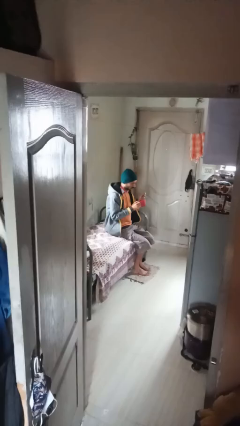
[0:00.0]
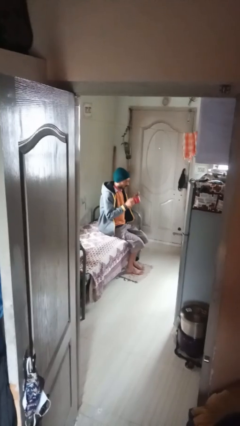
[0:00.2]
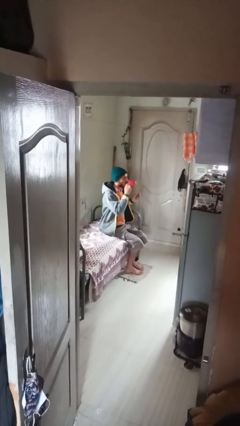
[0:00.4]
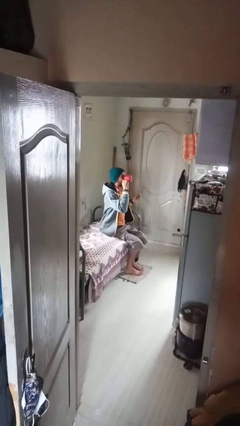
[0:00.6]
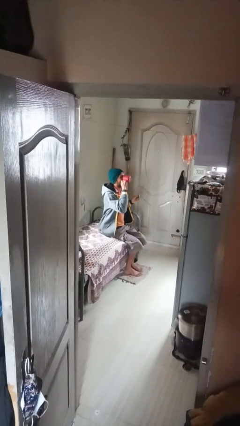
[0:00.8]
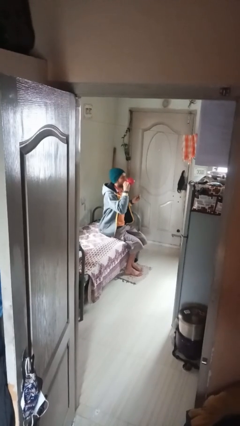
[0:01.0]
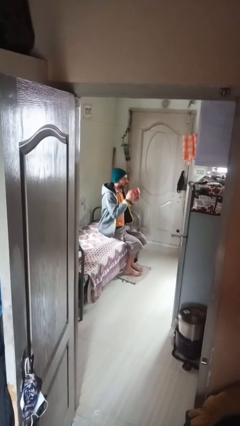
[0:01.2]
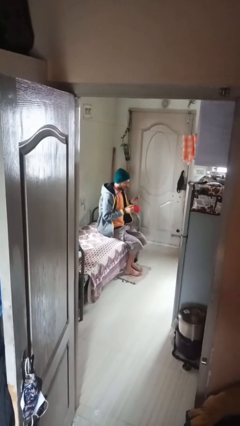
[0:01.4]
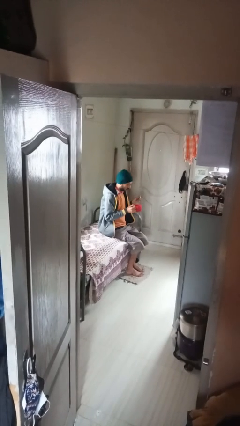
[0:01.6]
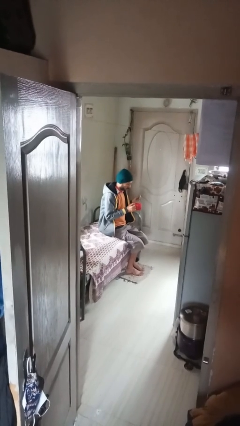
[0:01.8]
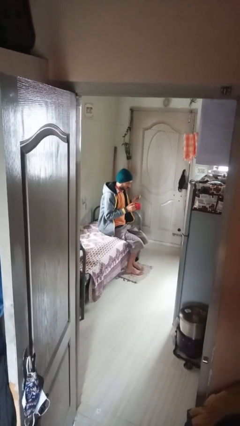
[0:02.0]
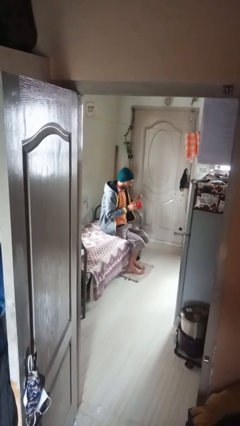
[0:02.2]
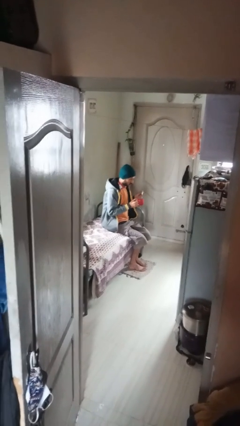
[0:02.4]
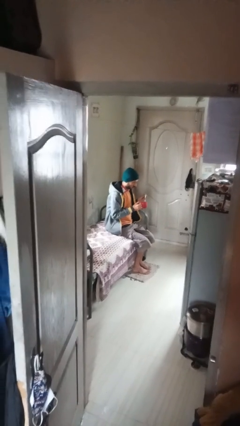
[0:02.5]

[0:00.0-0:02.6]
person drinks from mug

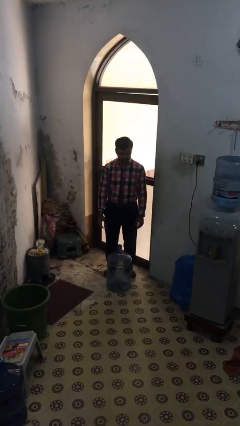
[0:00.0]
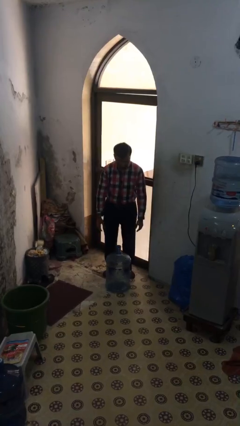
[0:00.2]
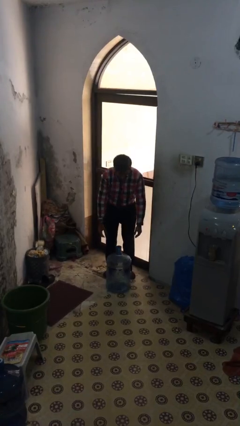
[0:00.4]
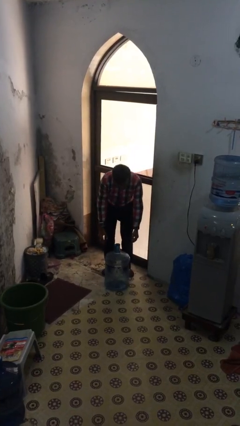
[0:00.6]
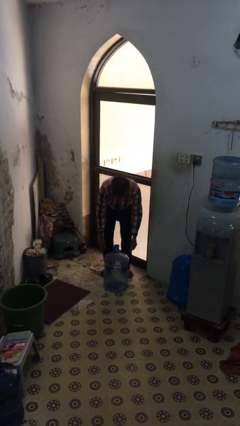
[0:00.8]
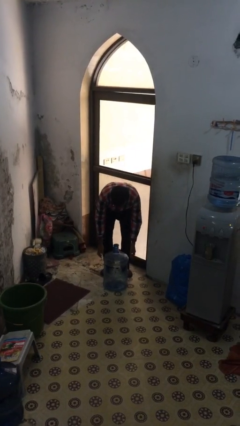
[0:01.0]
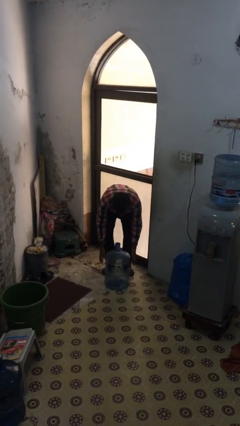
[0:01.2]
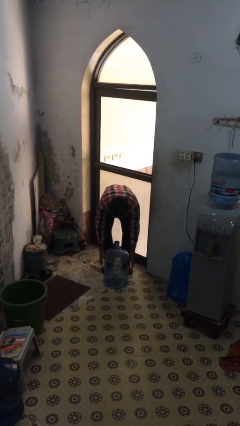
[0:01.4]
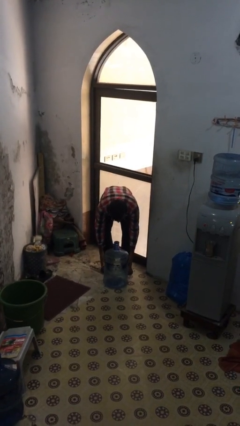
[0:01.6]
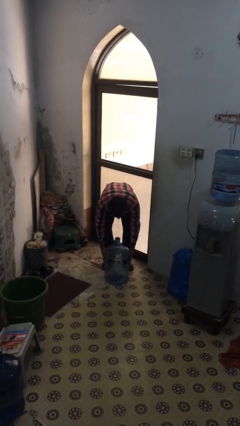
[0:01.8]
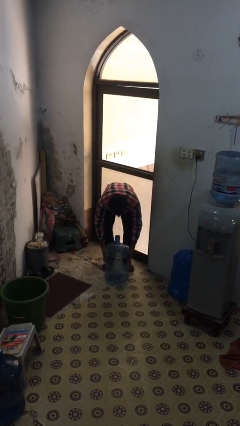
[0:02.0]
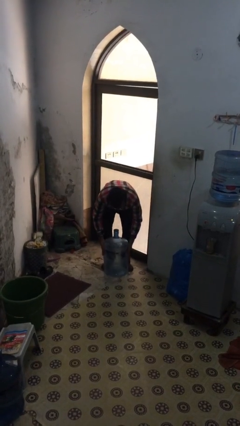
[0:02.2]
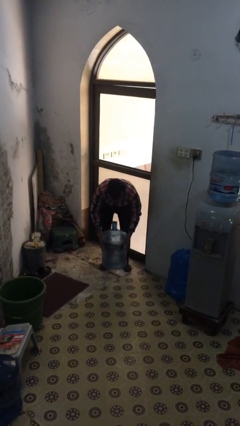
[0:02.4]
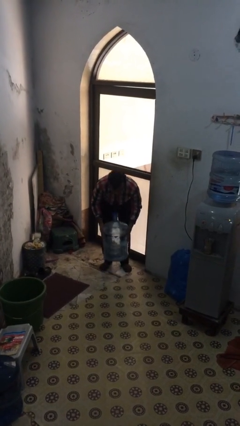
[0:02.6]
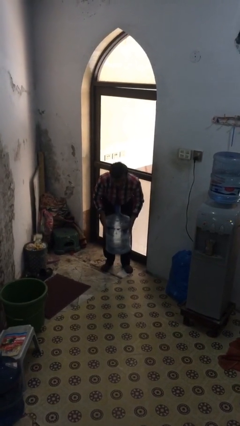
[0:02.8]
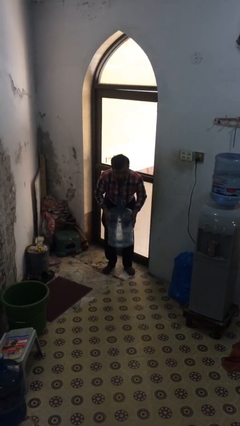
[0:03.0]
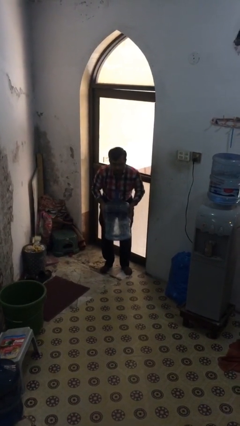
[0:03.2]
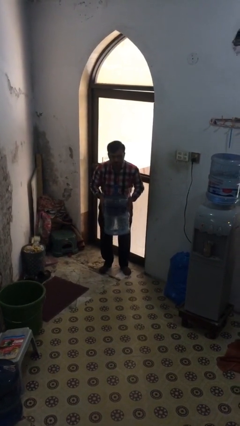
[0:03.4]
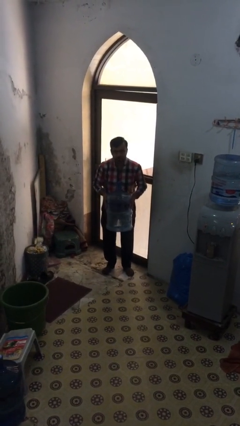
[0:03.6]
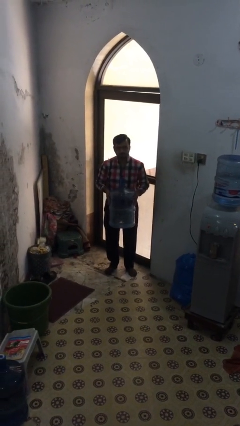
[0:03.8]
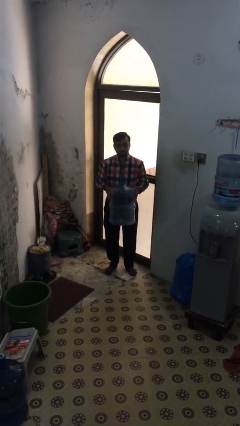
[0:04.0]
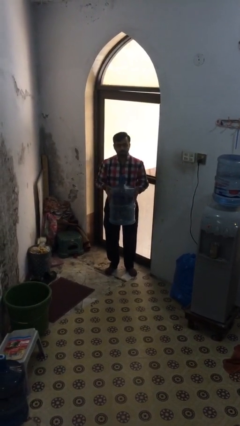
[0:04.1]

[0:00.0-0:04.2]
person picks up object from floor

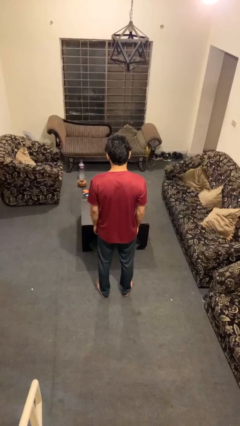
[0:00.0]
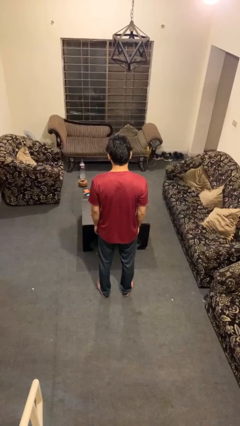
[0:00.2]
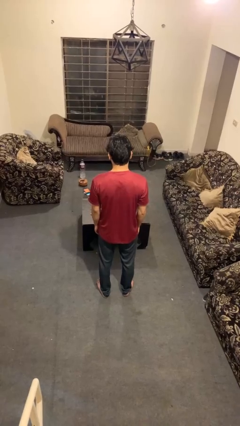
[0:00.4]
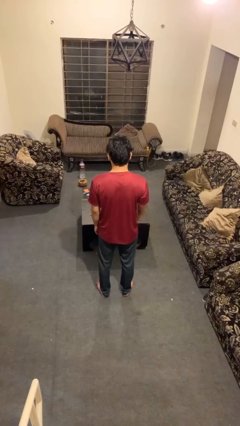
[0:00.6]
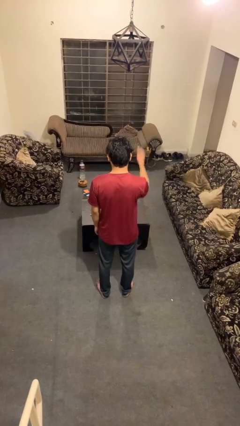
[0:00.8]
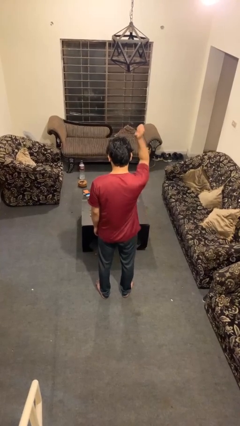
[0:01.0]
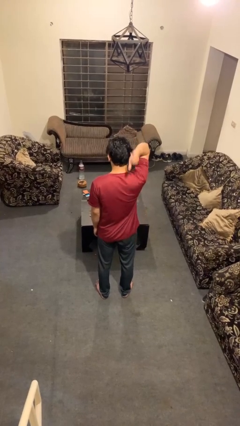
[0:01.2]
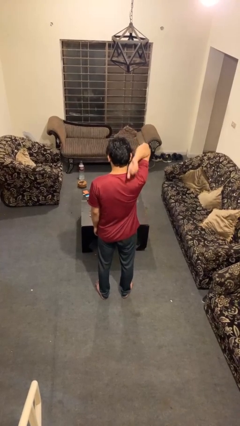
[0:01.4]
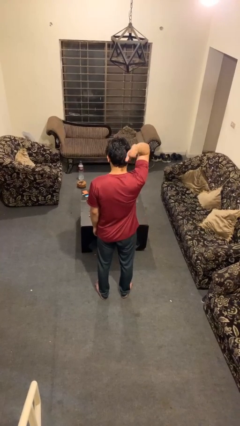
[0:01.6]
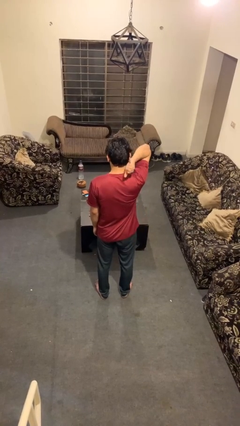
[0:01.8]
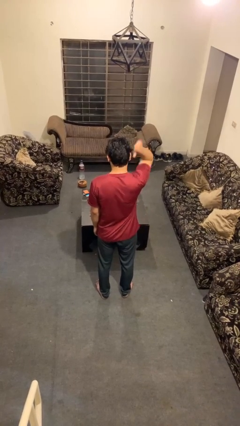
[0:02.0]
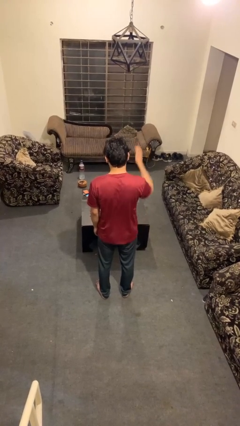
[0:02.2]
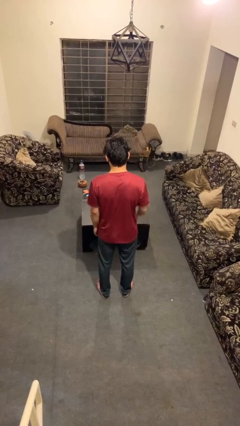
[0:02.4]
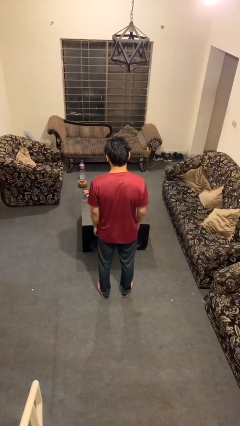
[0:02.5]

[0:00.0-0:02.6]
person gestures behind me

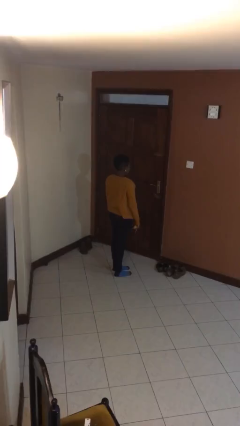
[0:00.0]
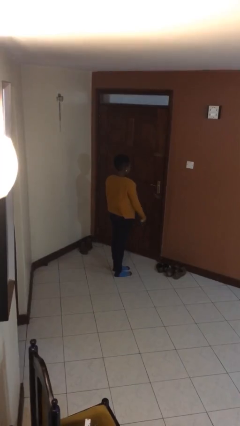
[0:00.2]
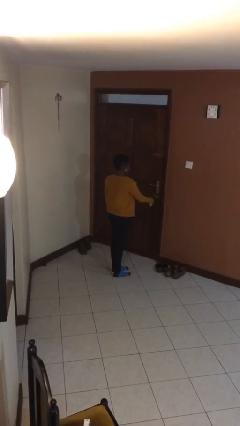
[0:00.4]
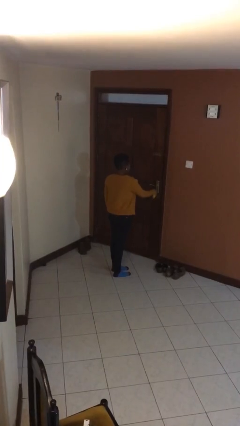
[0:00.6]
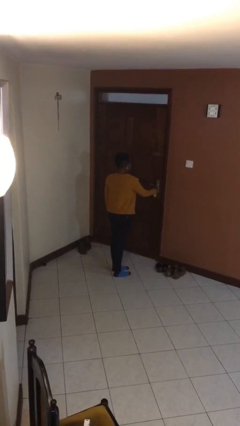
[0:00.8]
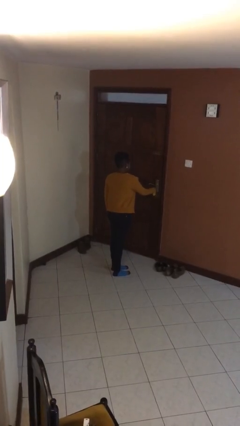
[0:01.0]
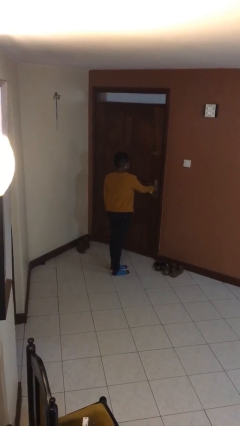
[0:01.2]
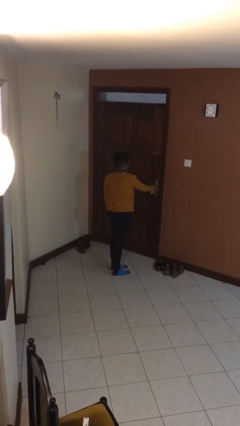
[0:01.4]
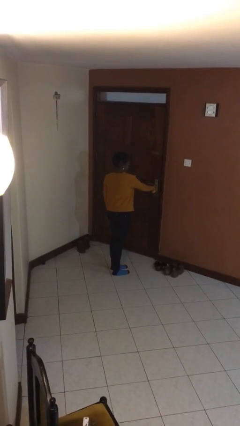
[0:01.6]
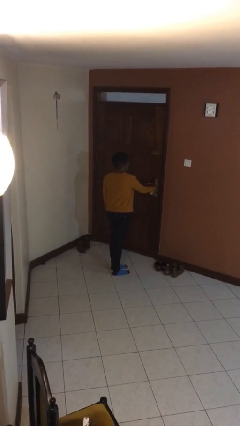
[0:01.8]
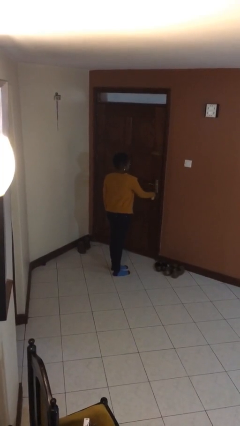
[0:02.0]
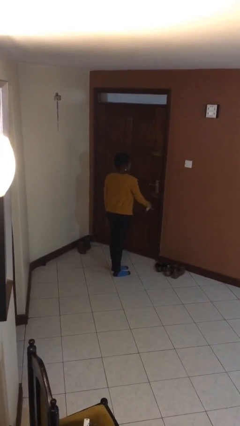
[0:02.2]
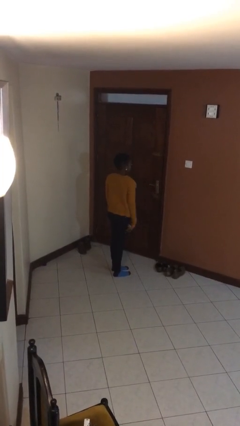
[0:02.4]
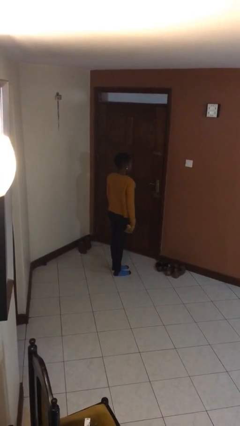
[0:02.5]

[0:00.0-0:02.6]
person unlocks door with keys

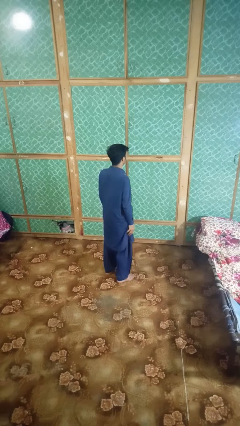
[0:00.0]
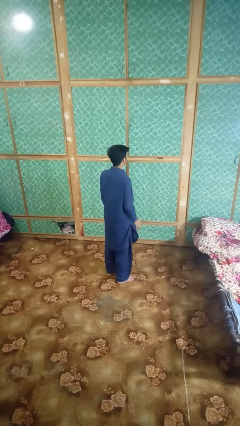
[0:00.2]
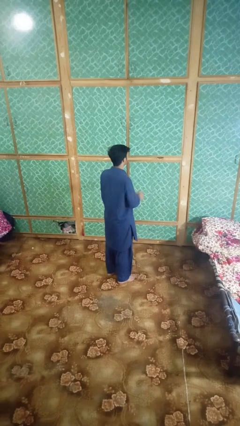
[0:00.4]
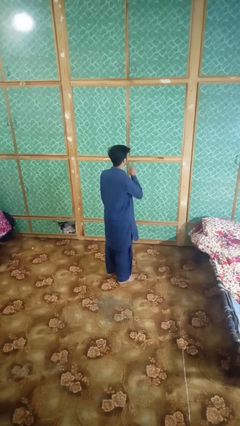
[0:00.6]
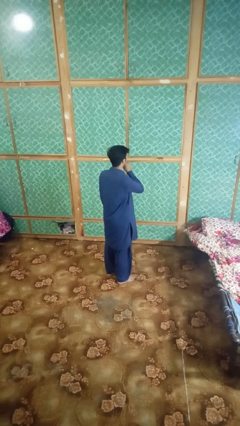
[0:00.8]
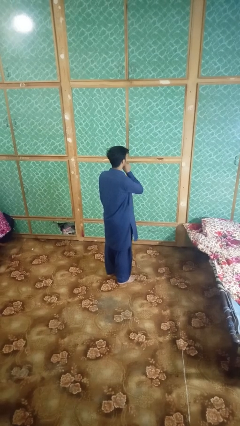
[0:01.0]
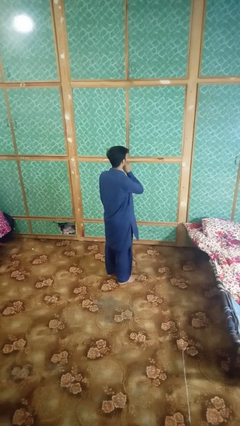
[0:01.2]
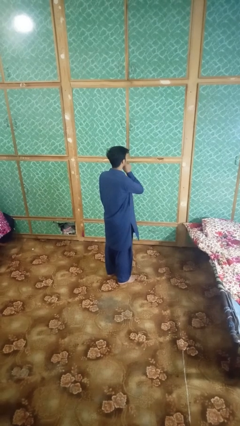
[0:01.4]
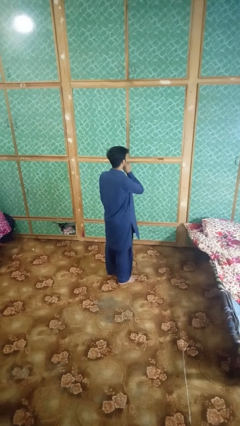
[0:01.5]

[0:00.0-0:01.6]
person gestures be quiet

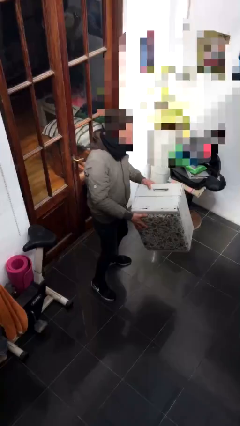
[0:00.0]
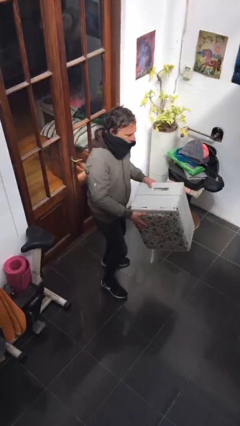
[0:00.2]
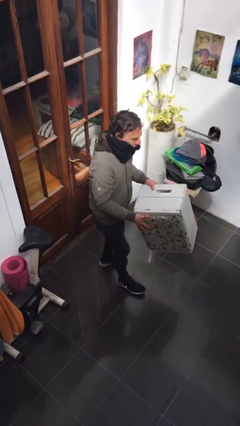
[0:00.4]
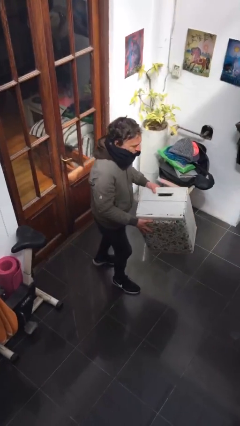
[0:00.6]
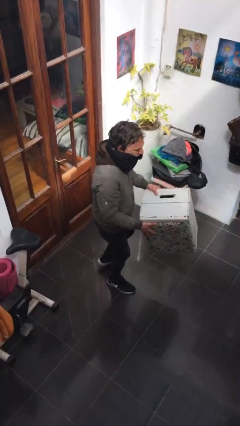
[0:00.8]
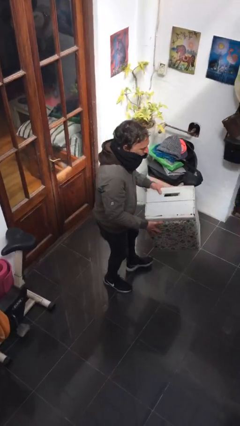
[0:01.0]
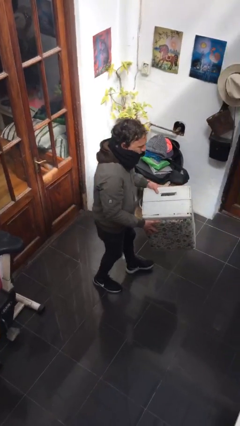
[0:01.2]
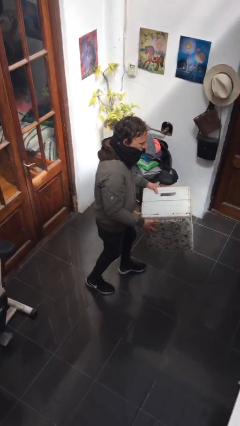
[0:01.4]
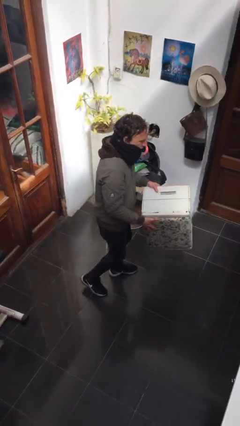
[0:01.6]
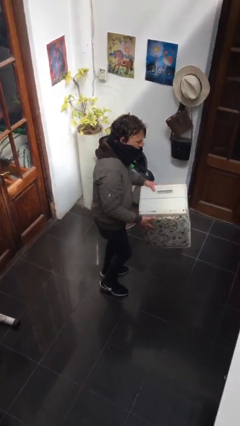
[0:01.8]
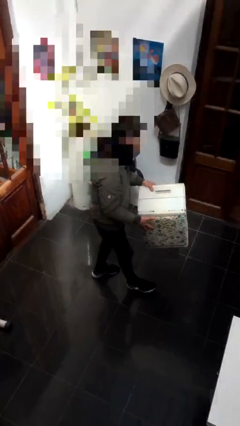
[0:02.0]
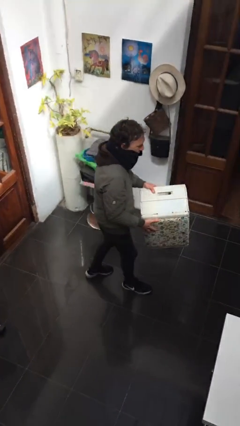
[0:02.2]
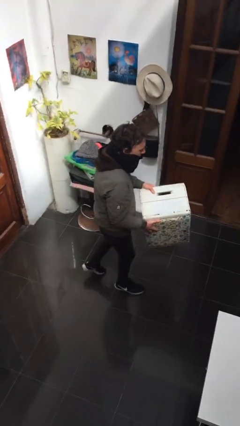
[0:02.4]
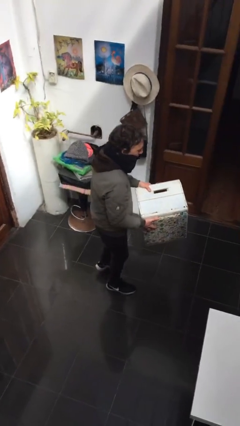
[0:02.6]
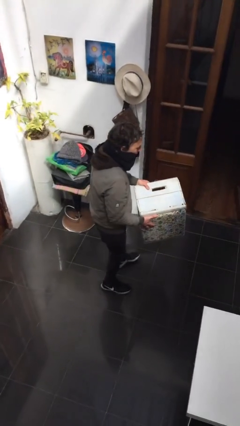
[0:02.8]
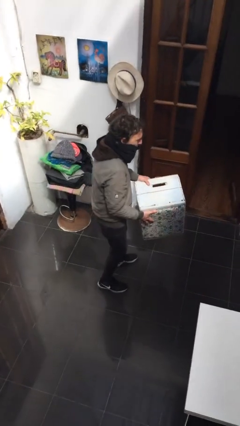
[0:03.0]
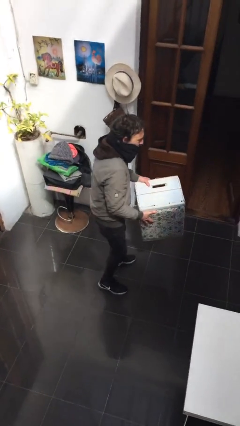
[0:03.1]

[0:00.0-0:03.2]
person carries heavy object

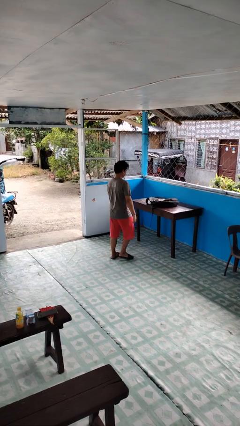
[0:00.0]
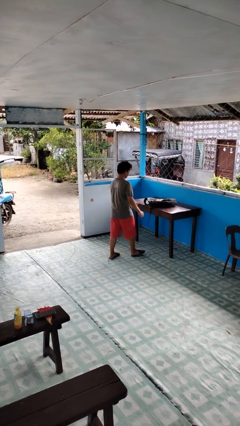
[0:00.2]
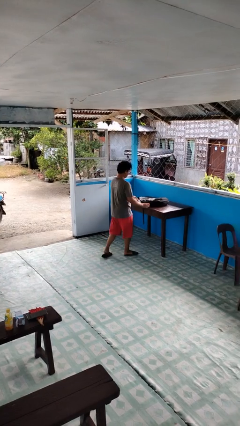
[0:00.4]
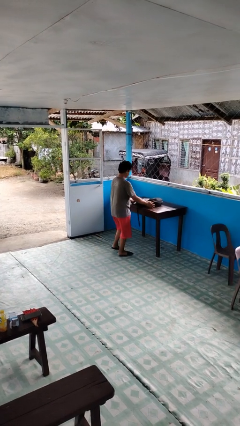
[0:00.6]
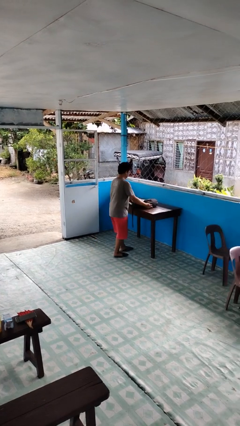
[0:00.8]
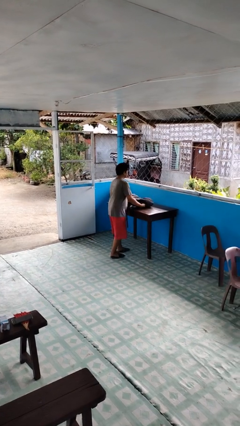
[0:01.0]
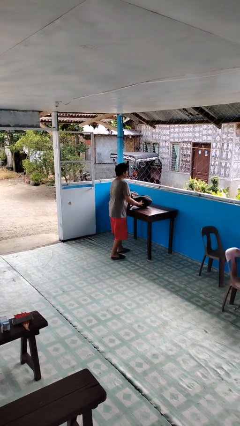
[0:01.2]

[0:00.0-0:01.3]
person picks up object from table
